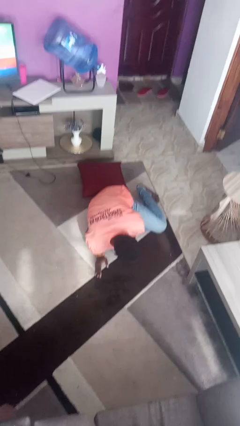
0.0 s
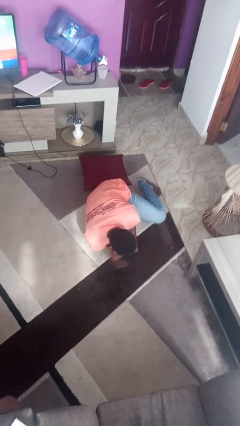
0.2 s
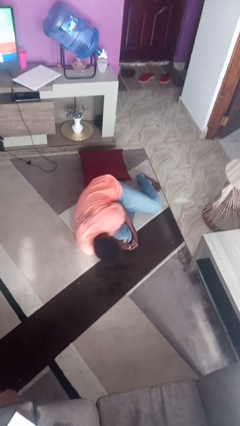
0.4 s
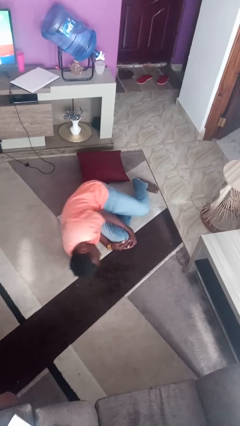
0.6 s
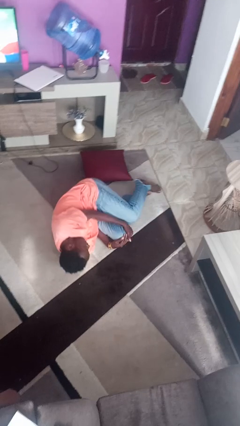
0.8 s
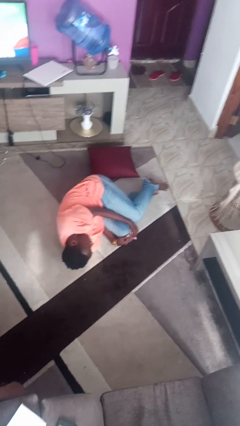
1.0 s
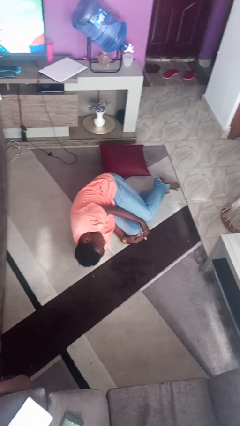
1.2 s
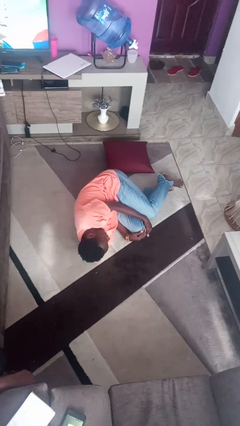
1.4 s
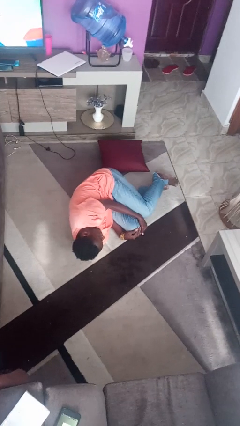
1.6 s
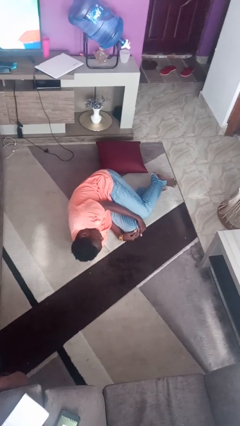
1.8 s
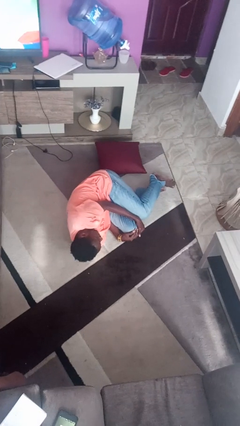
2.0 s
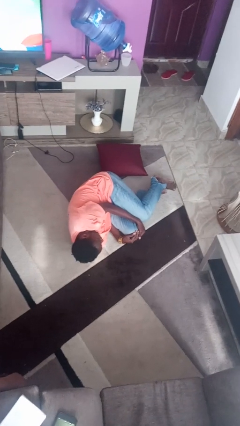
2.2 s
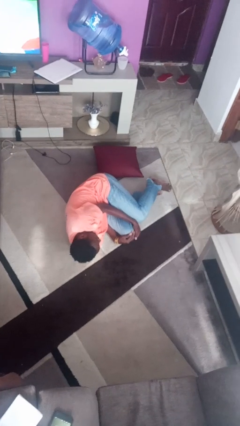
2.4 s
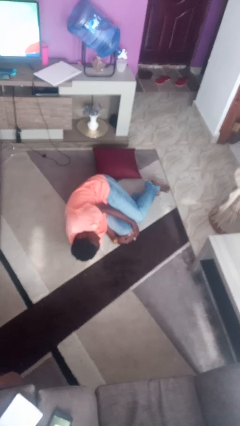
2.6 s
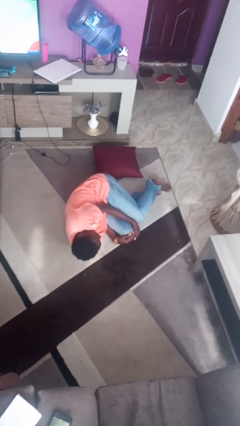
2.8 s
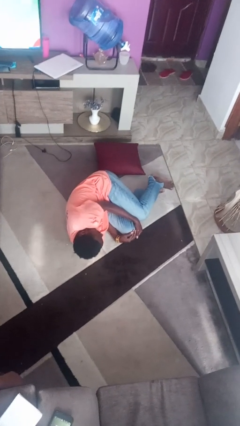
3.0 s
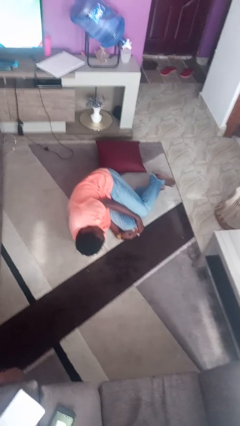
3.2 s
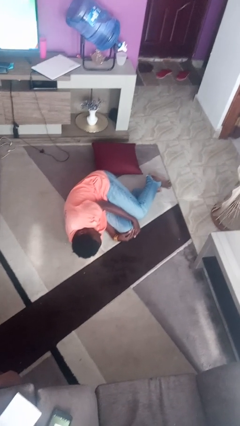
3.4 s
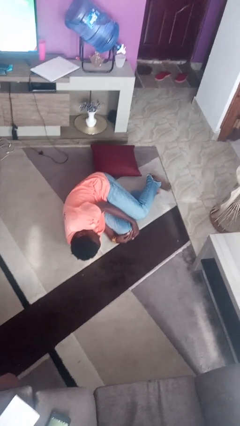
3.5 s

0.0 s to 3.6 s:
person lies down on floor

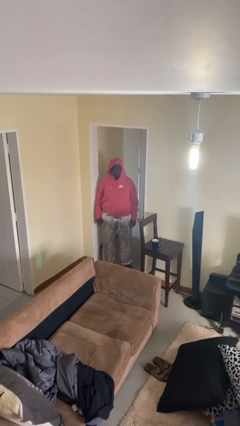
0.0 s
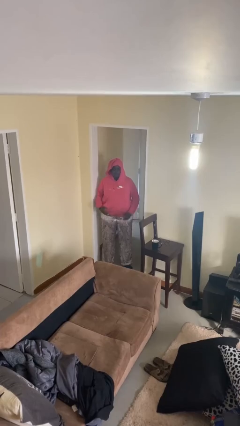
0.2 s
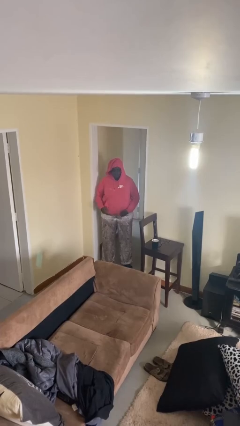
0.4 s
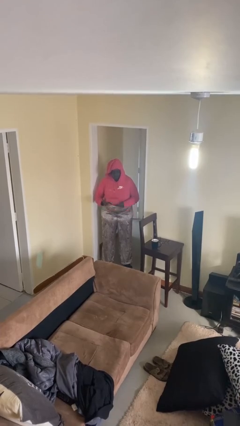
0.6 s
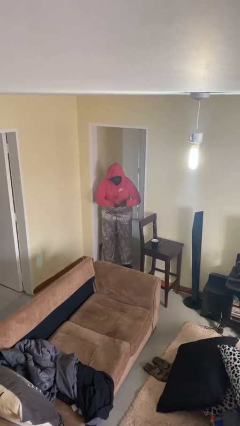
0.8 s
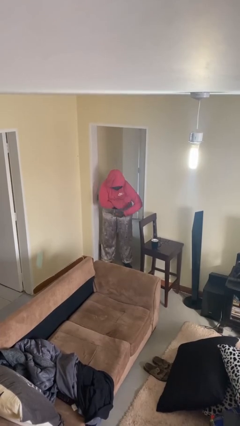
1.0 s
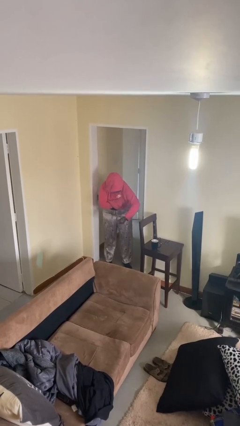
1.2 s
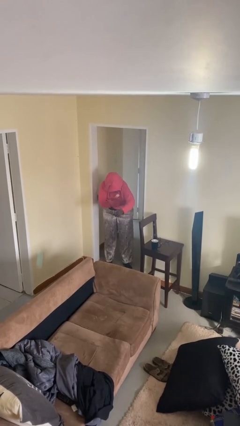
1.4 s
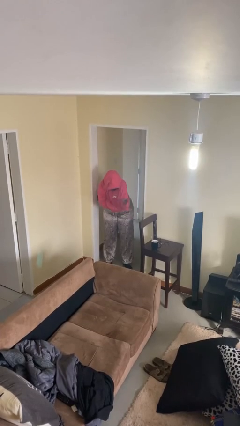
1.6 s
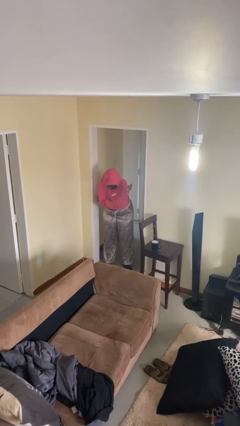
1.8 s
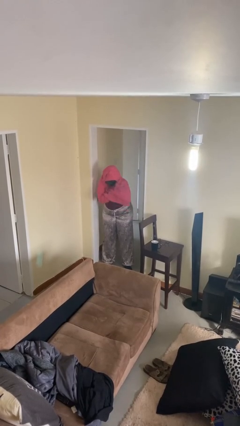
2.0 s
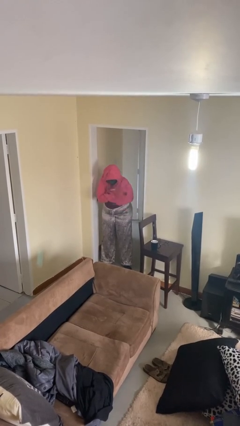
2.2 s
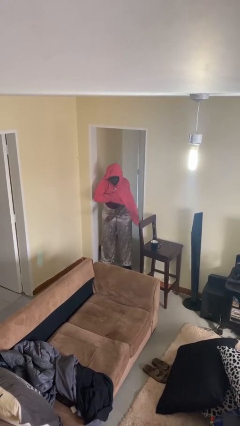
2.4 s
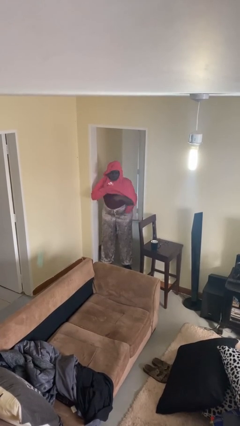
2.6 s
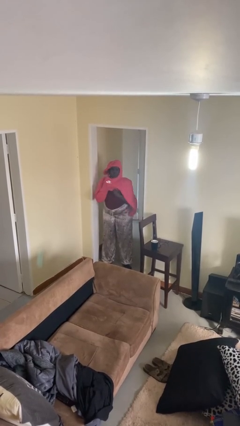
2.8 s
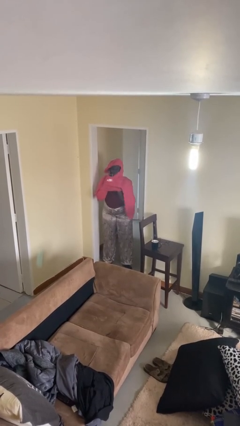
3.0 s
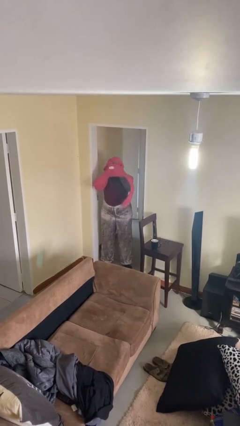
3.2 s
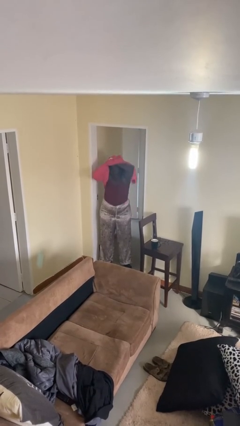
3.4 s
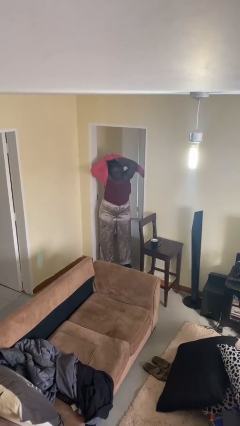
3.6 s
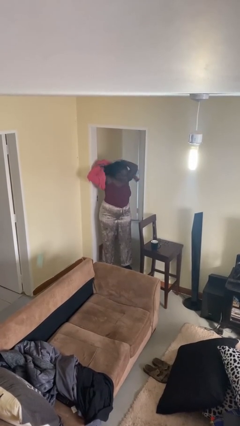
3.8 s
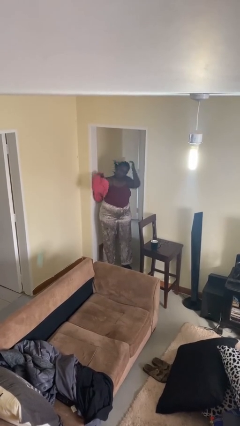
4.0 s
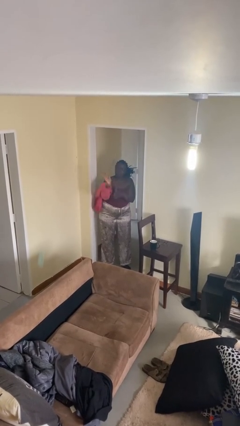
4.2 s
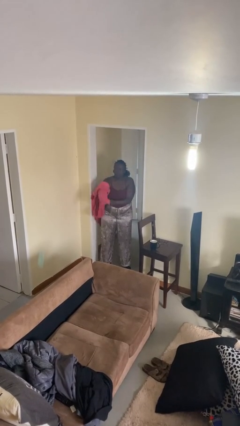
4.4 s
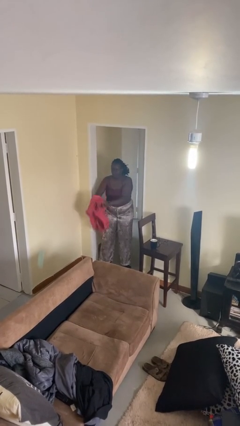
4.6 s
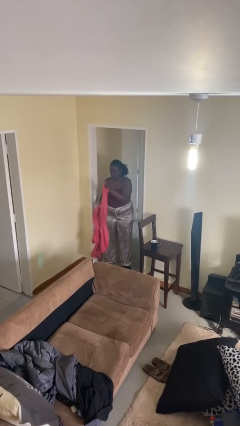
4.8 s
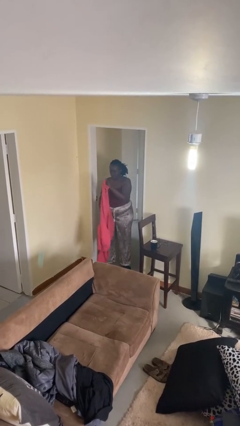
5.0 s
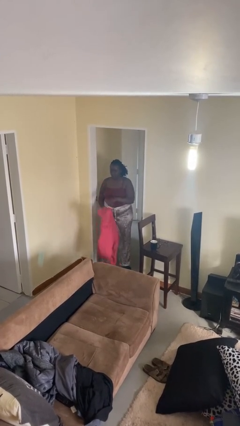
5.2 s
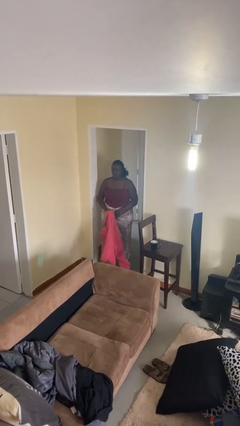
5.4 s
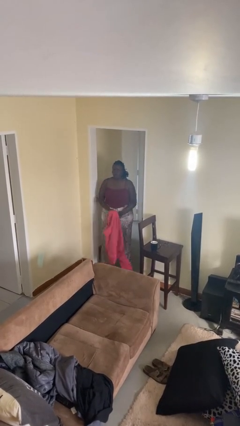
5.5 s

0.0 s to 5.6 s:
person takes off hoodie

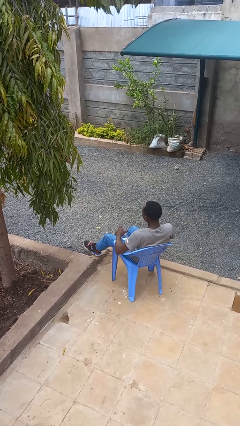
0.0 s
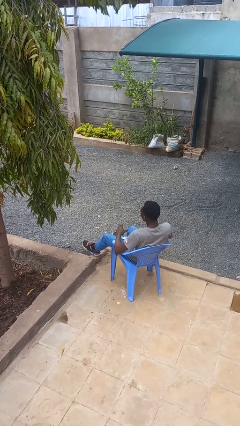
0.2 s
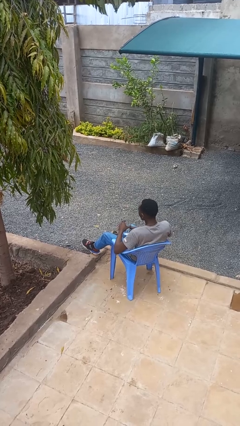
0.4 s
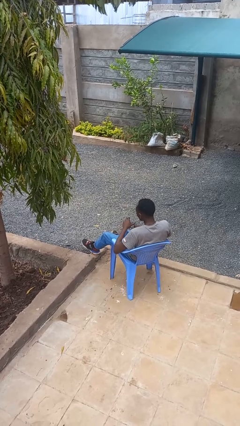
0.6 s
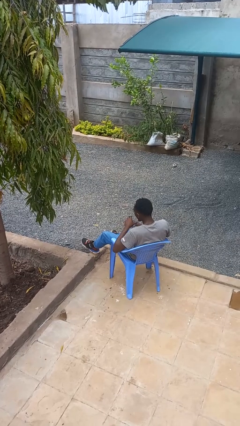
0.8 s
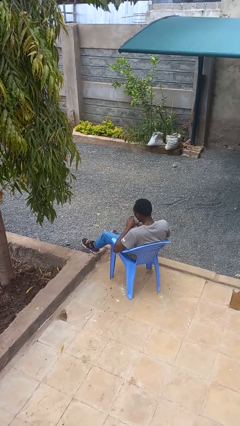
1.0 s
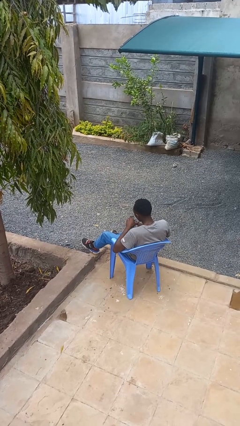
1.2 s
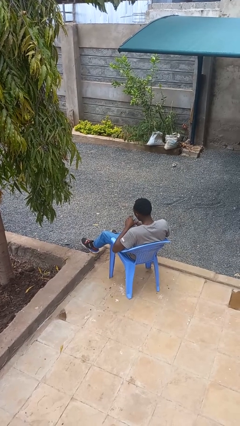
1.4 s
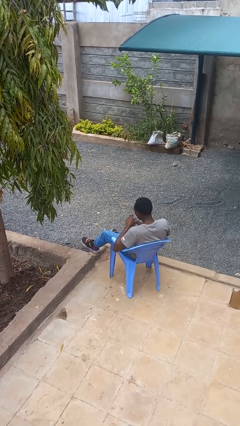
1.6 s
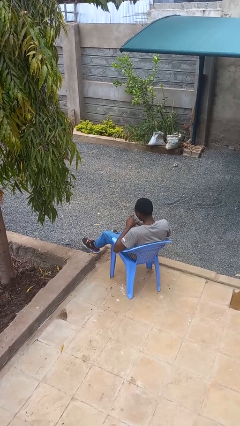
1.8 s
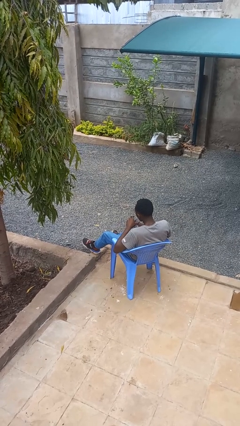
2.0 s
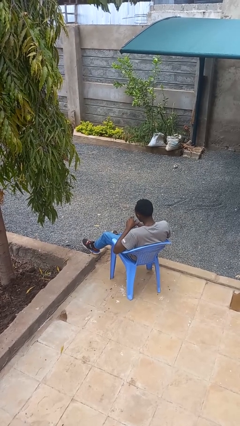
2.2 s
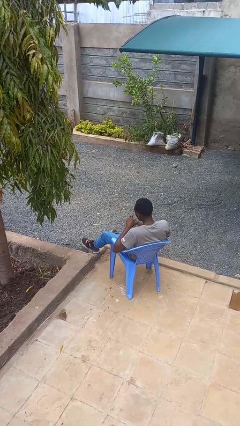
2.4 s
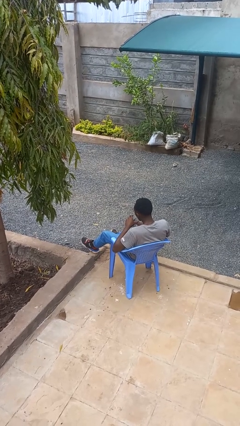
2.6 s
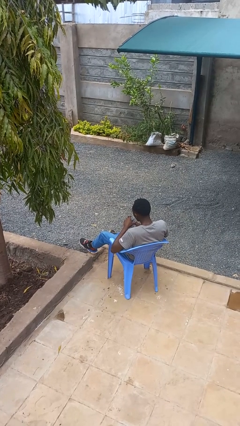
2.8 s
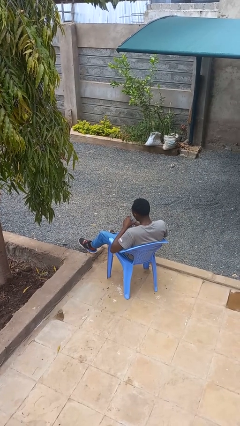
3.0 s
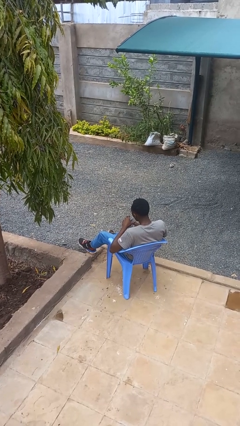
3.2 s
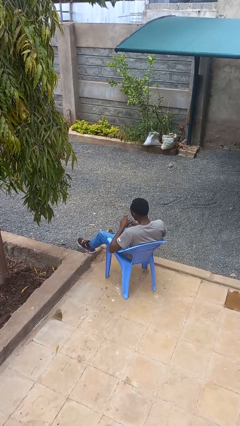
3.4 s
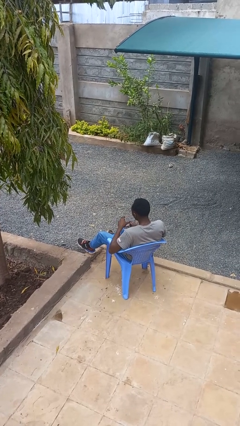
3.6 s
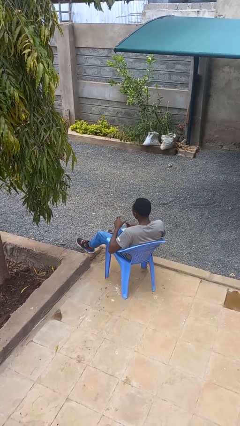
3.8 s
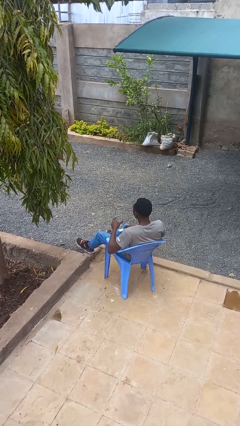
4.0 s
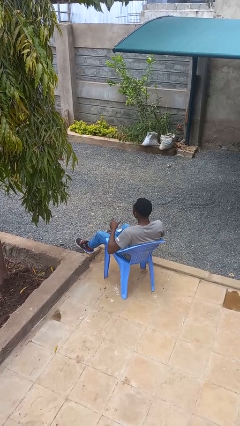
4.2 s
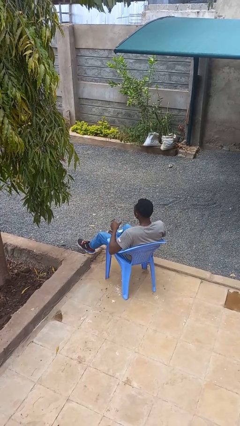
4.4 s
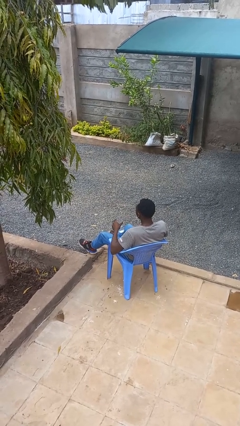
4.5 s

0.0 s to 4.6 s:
person drinks from straw

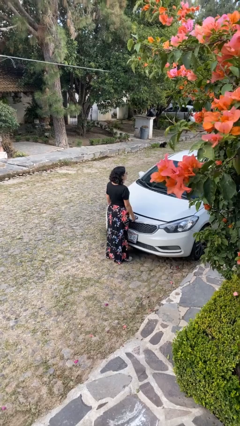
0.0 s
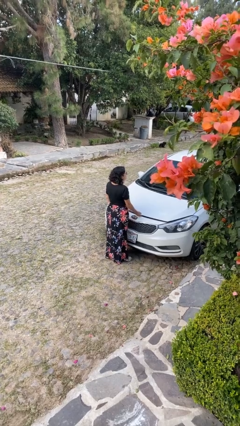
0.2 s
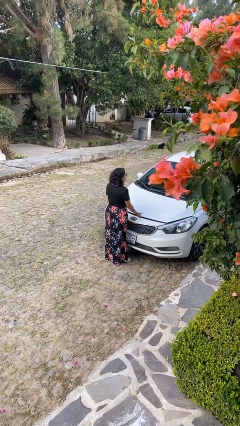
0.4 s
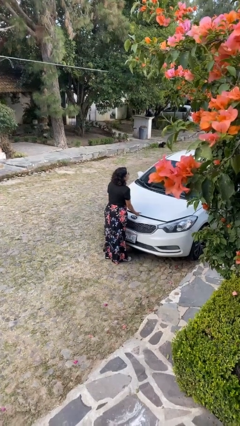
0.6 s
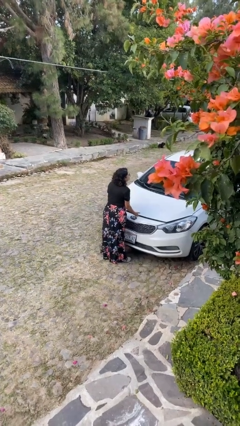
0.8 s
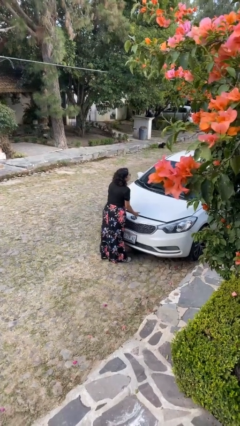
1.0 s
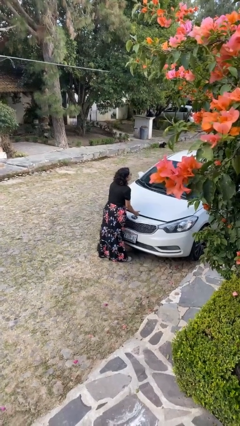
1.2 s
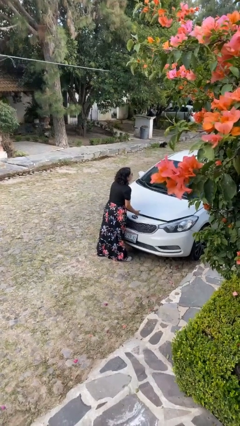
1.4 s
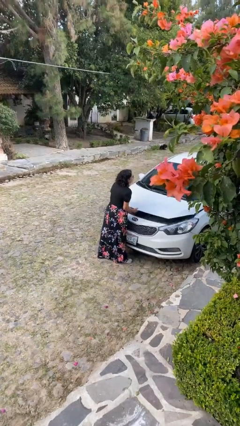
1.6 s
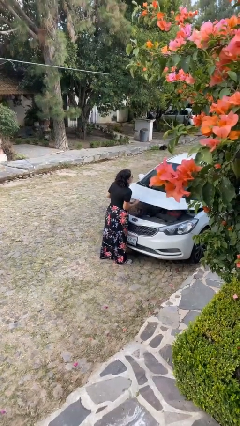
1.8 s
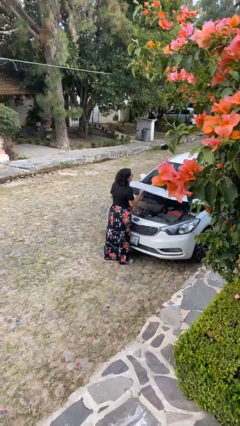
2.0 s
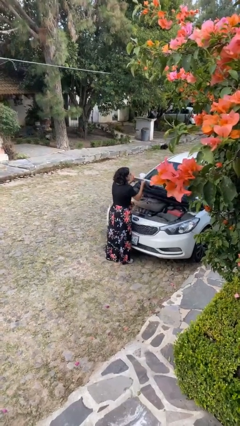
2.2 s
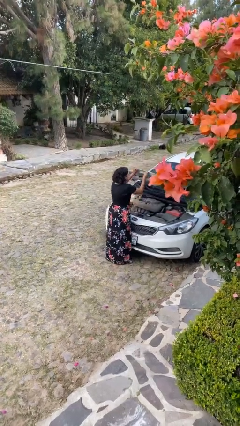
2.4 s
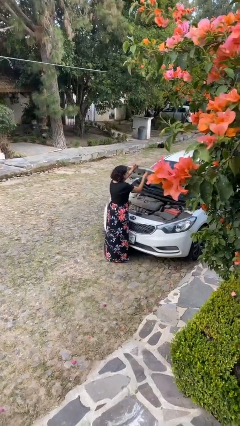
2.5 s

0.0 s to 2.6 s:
person opens car hood

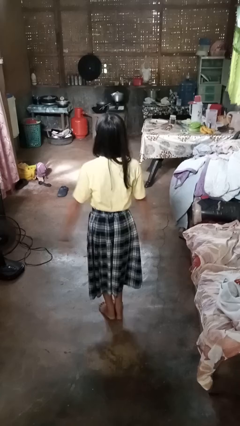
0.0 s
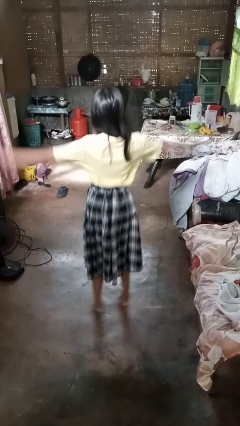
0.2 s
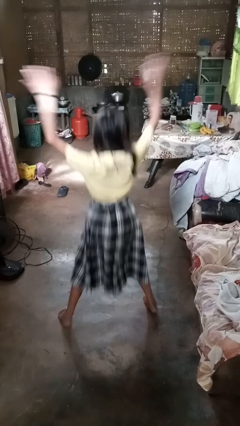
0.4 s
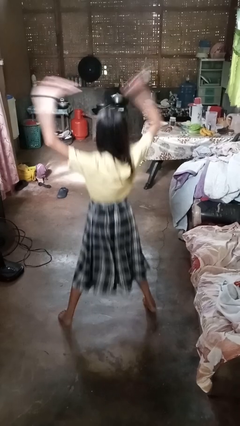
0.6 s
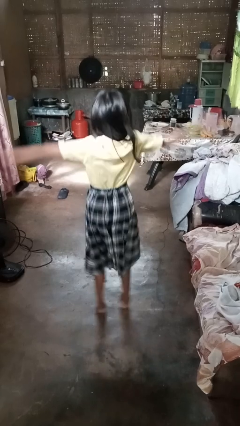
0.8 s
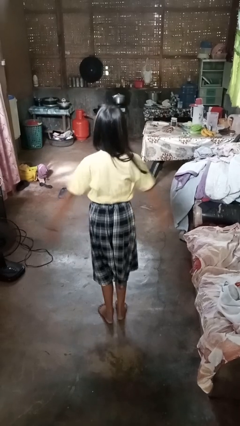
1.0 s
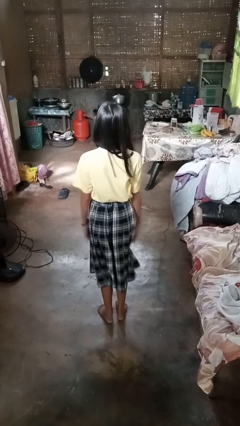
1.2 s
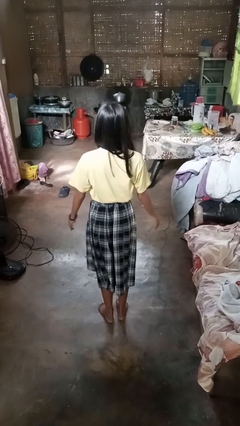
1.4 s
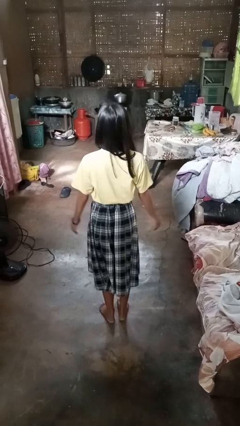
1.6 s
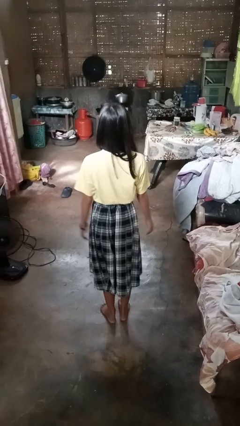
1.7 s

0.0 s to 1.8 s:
person exercises with jumping jacks
